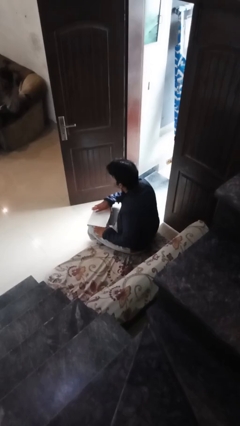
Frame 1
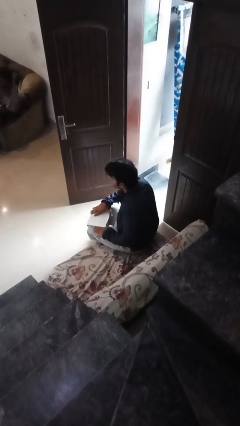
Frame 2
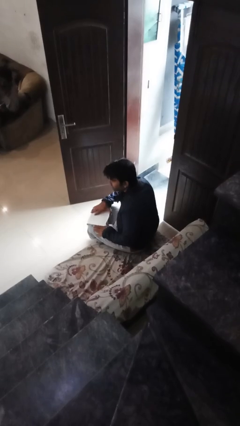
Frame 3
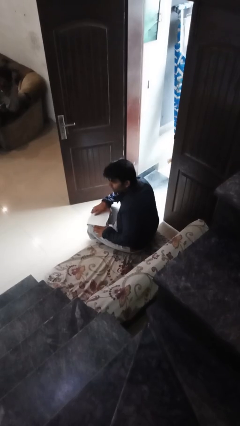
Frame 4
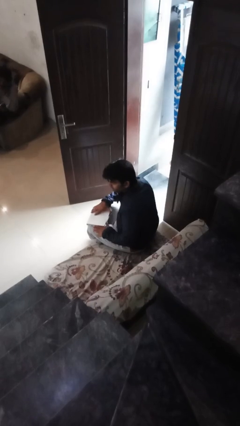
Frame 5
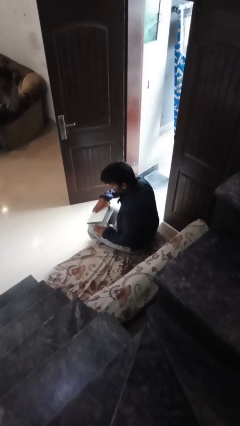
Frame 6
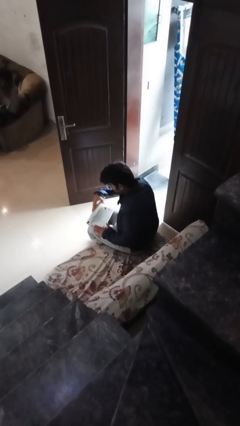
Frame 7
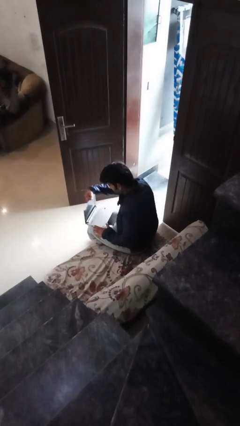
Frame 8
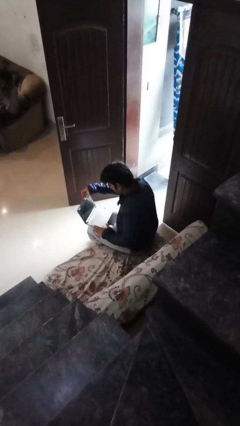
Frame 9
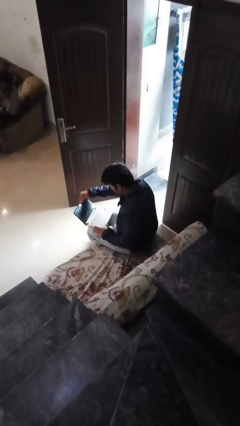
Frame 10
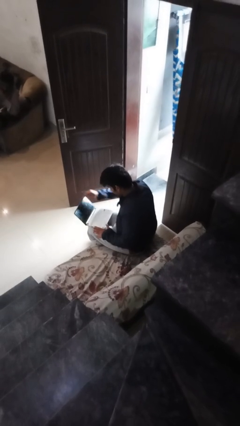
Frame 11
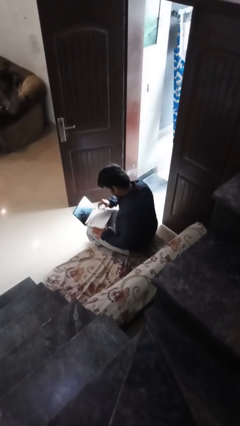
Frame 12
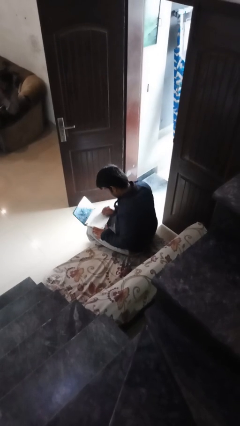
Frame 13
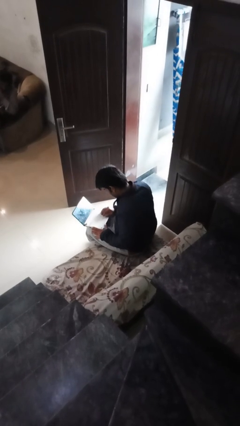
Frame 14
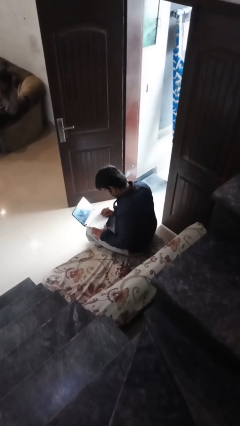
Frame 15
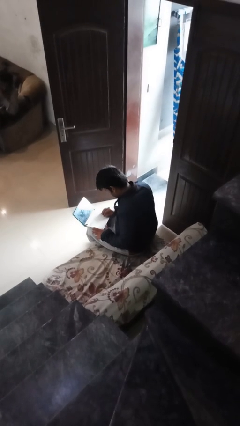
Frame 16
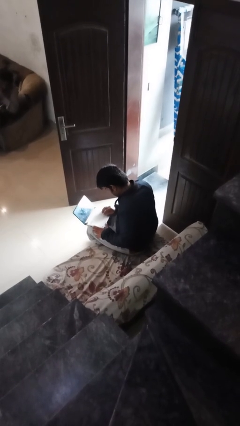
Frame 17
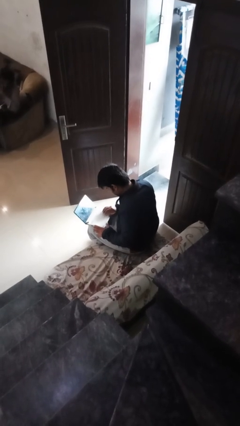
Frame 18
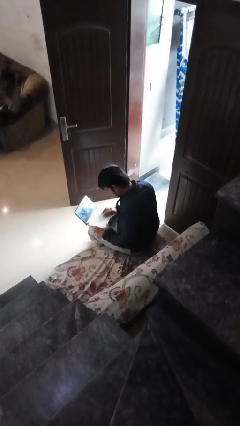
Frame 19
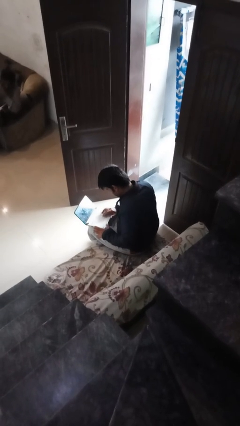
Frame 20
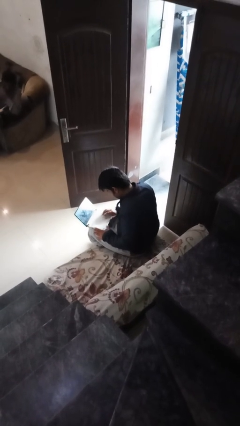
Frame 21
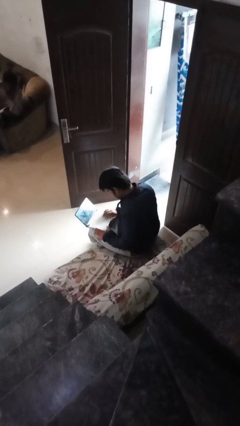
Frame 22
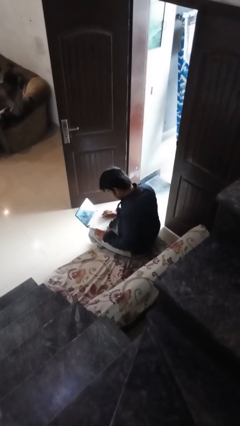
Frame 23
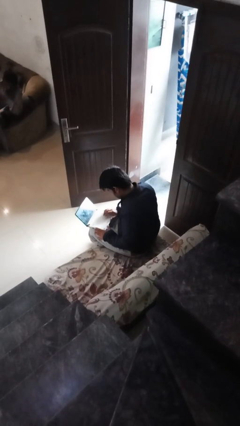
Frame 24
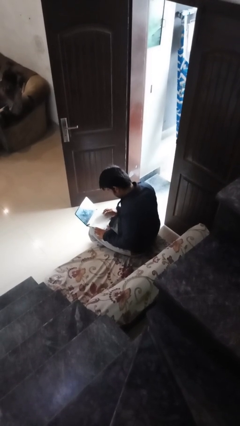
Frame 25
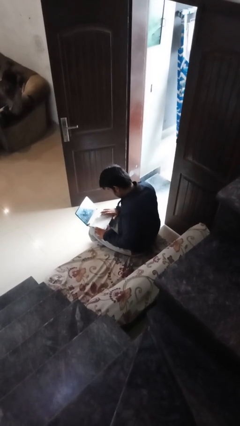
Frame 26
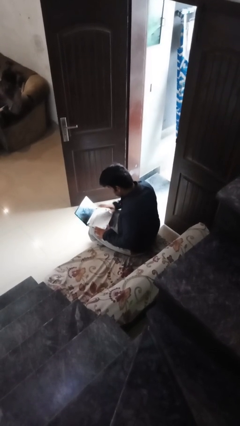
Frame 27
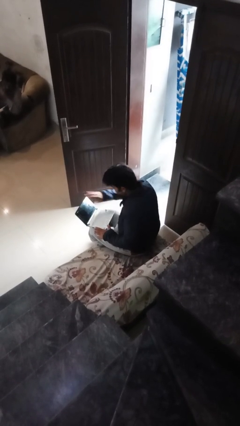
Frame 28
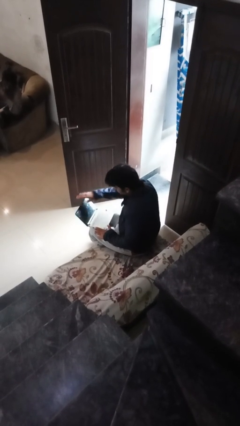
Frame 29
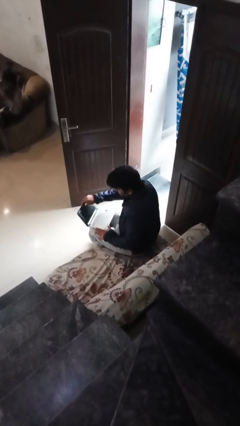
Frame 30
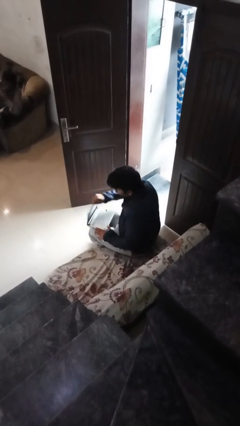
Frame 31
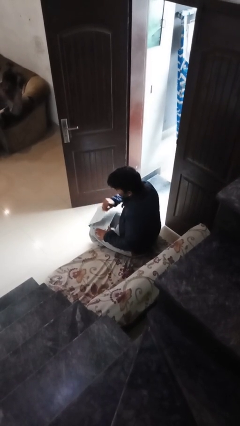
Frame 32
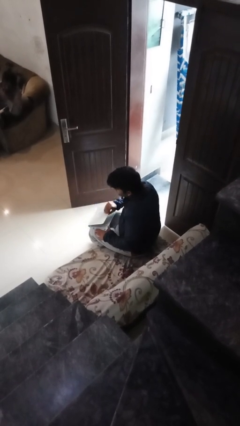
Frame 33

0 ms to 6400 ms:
person interacts with laptop

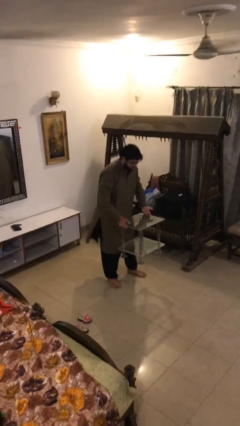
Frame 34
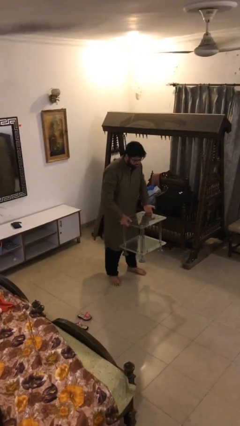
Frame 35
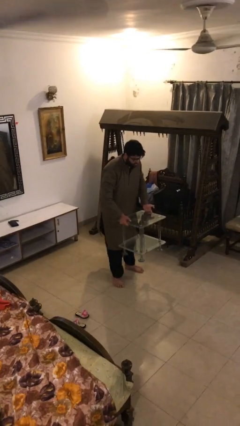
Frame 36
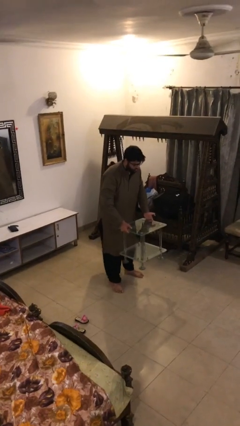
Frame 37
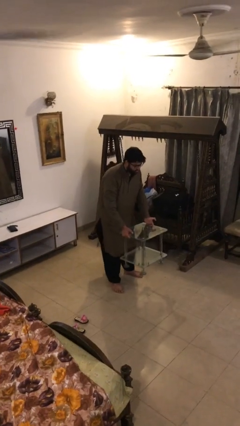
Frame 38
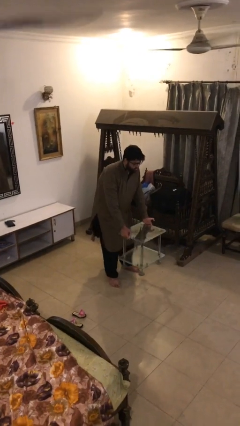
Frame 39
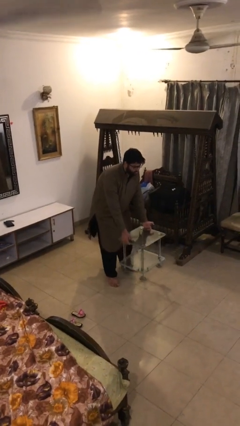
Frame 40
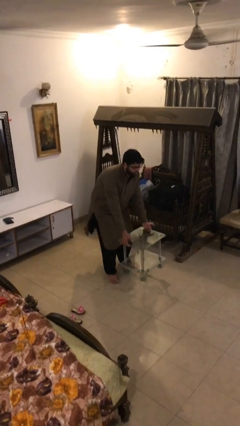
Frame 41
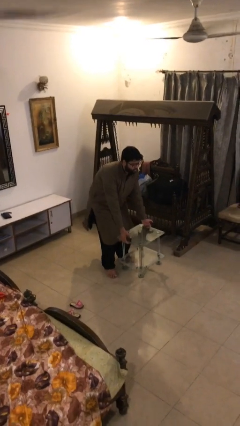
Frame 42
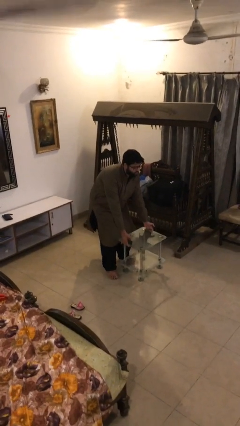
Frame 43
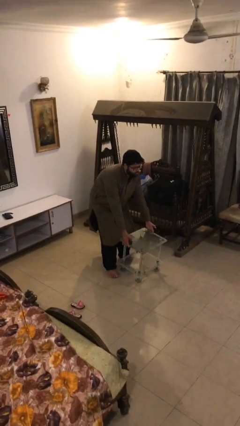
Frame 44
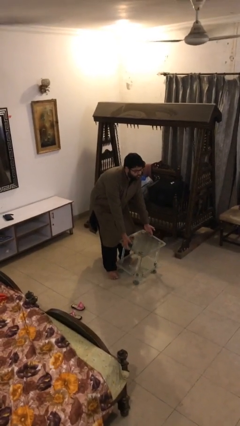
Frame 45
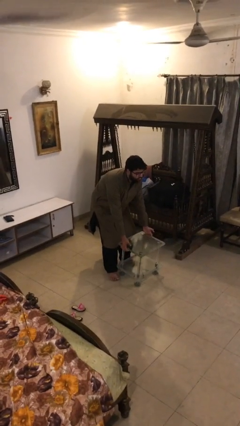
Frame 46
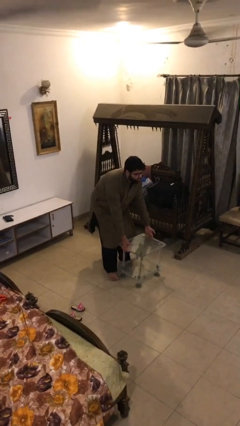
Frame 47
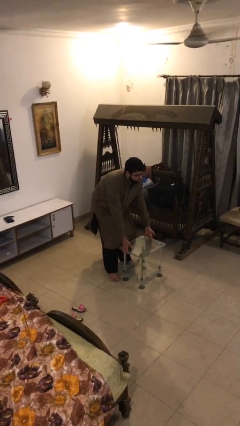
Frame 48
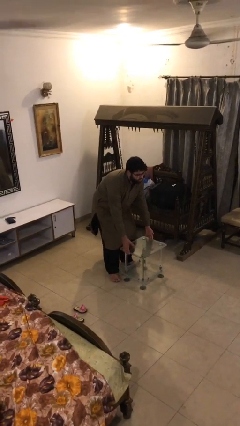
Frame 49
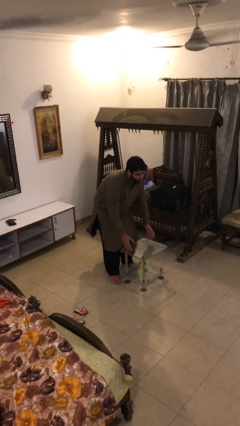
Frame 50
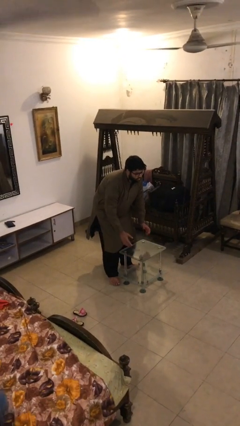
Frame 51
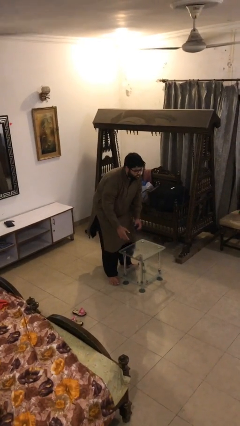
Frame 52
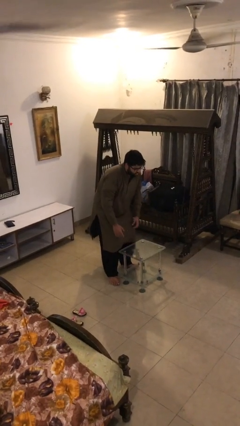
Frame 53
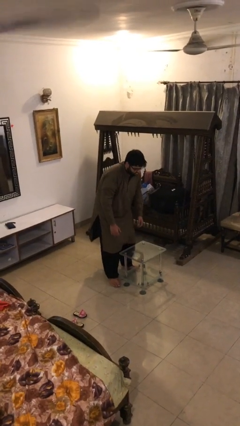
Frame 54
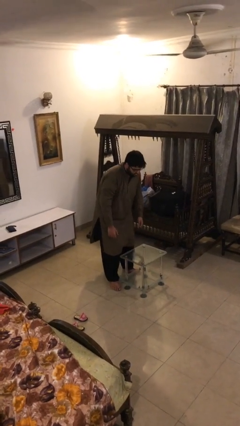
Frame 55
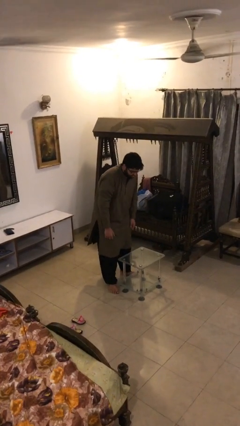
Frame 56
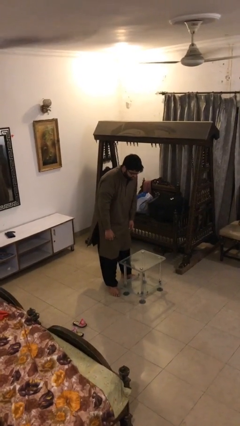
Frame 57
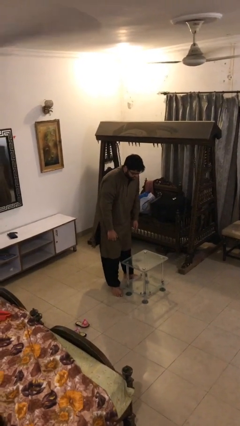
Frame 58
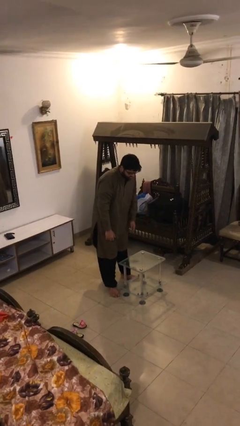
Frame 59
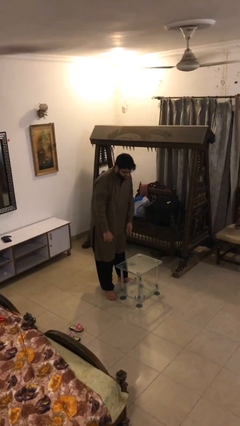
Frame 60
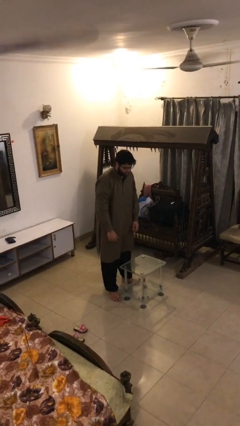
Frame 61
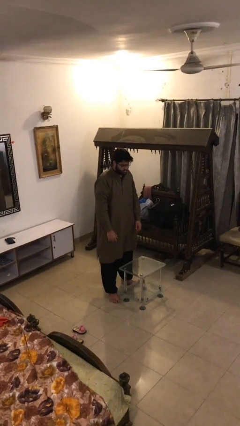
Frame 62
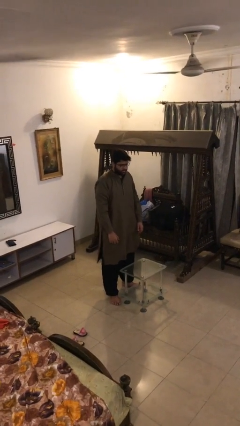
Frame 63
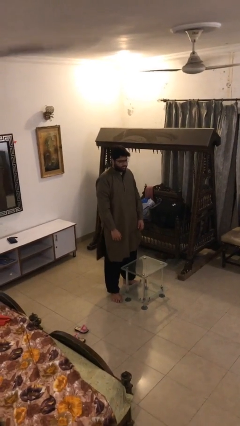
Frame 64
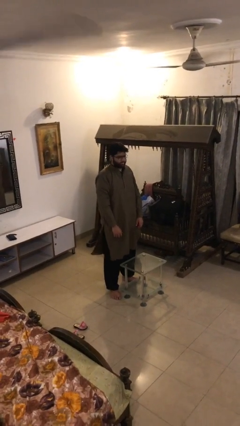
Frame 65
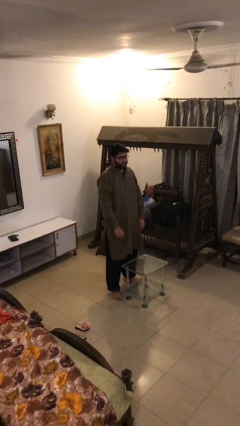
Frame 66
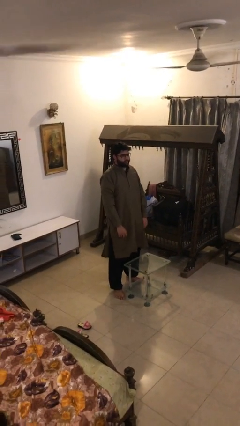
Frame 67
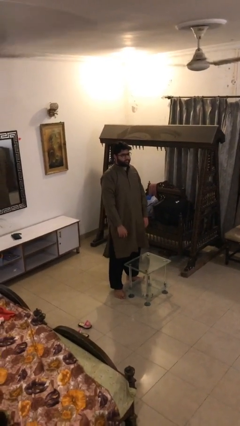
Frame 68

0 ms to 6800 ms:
person puts down object on floor

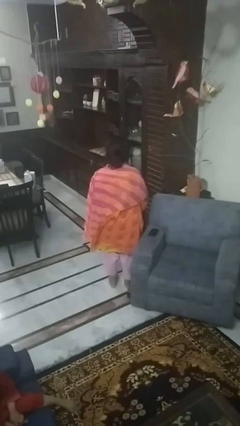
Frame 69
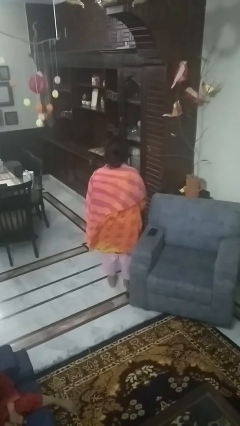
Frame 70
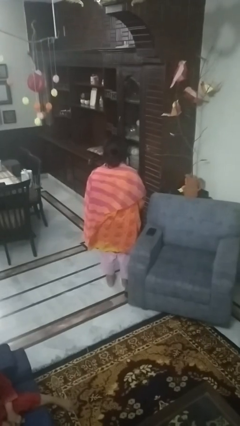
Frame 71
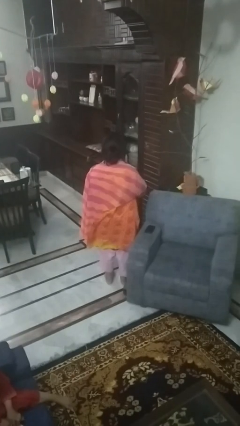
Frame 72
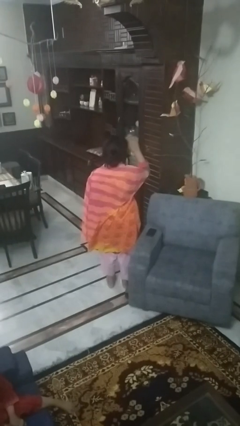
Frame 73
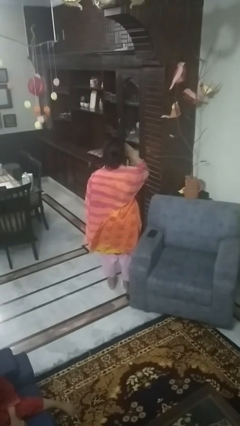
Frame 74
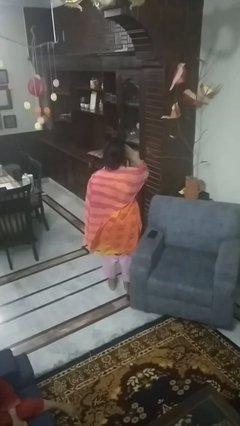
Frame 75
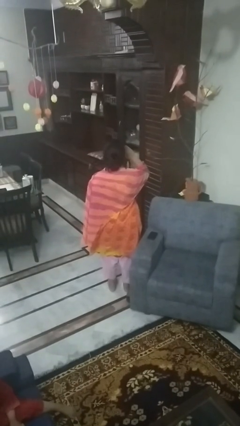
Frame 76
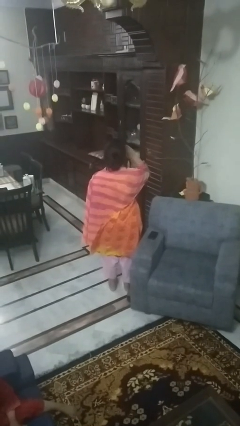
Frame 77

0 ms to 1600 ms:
person salutes

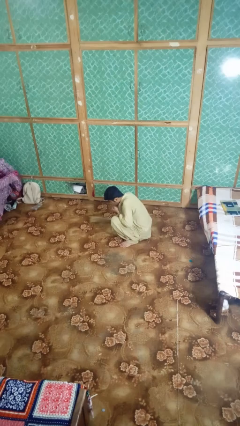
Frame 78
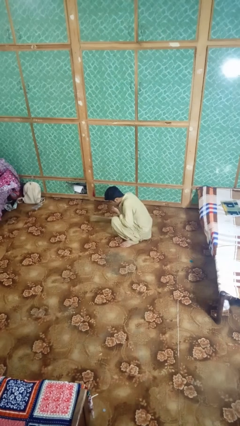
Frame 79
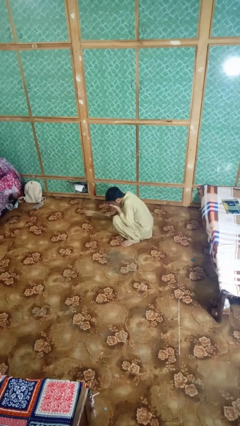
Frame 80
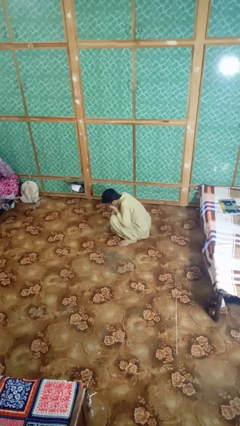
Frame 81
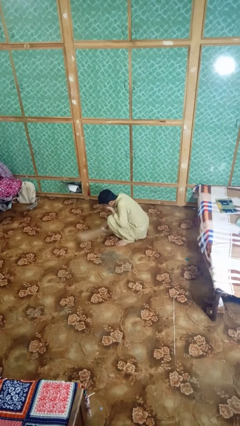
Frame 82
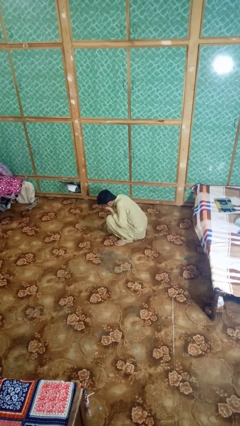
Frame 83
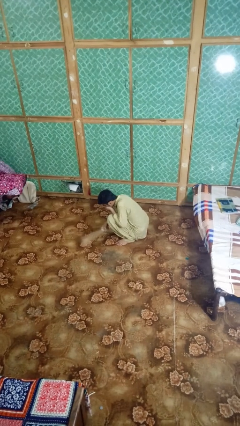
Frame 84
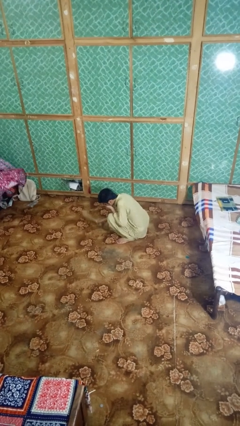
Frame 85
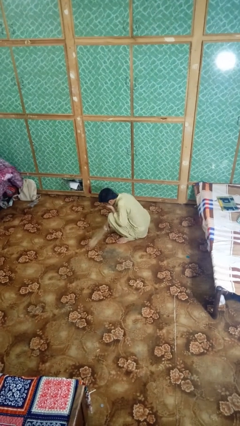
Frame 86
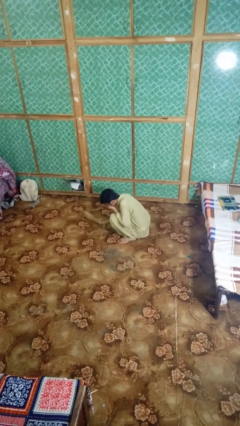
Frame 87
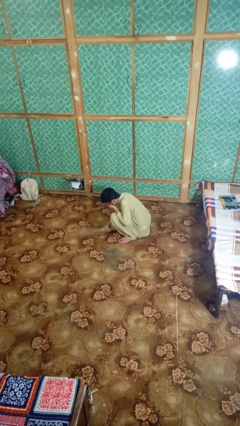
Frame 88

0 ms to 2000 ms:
person yawns

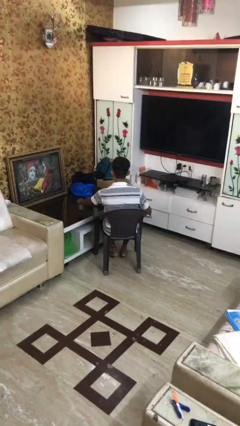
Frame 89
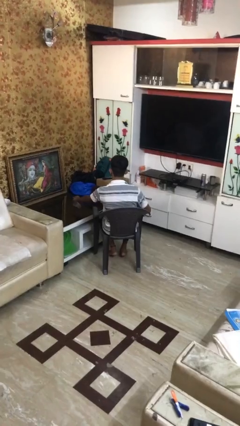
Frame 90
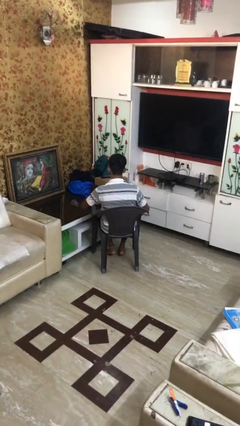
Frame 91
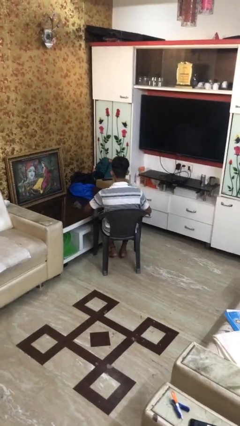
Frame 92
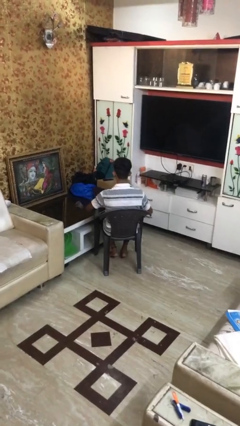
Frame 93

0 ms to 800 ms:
person knocks over glass
